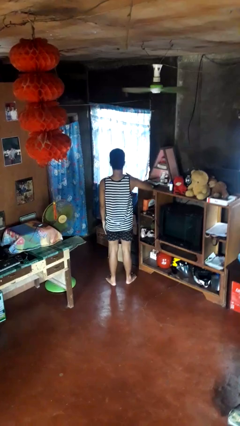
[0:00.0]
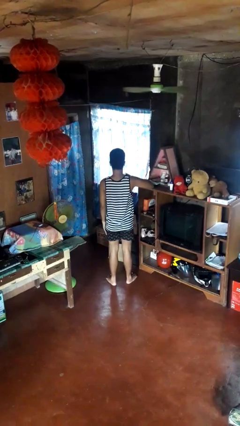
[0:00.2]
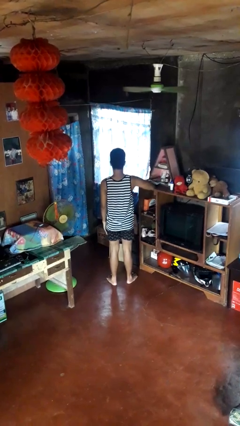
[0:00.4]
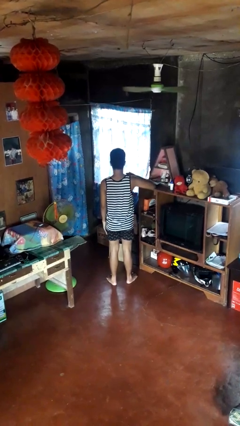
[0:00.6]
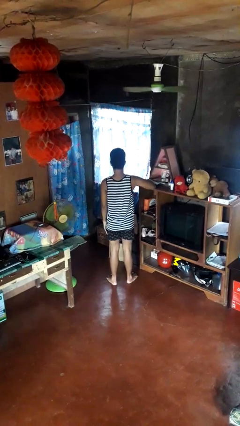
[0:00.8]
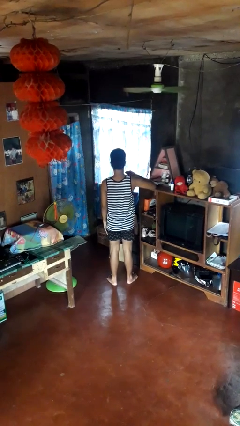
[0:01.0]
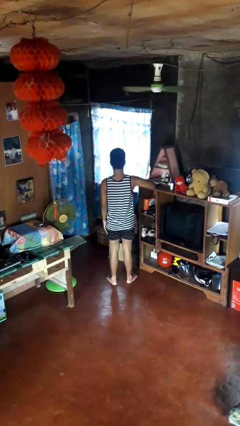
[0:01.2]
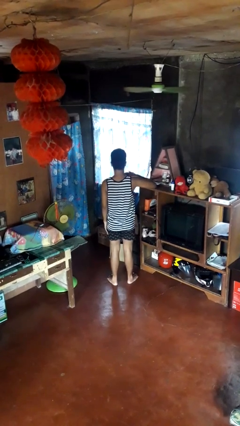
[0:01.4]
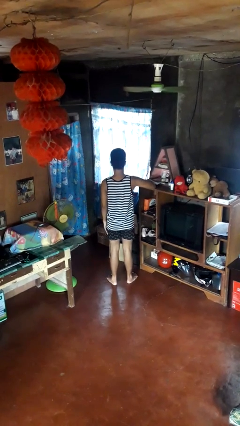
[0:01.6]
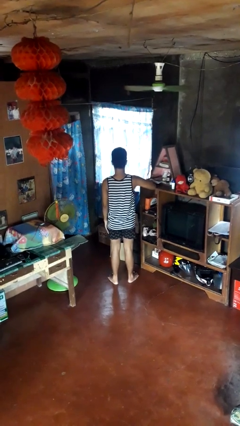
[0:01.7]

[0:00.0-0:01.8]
person drums on chest

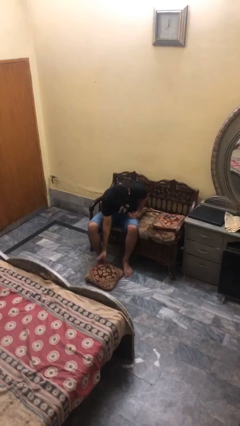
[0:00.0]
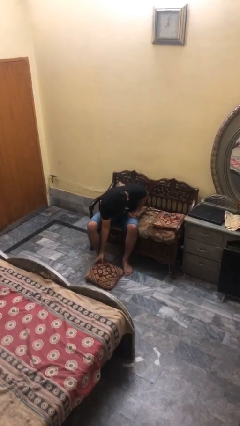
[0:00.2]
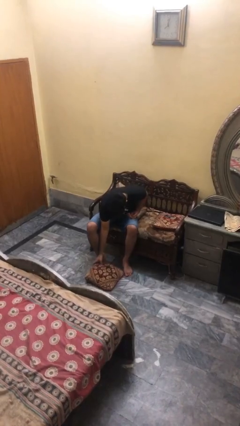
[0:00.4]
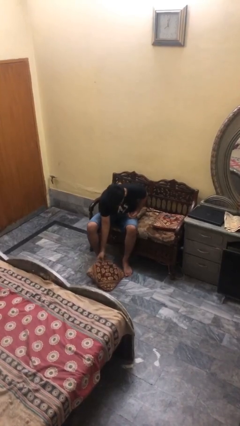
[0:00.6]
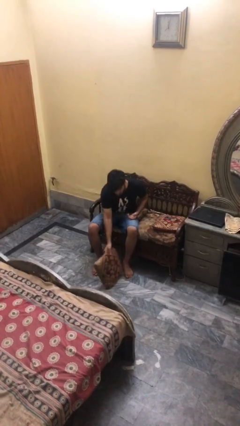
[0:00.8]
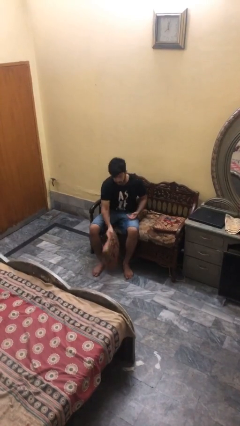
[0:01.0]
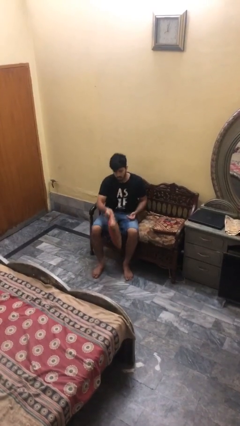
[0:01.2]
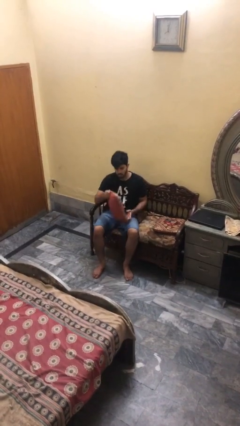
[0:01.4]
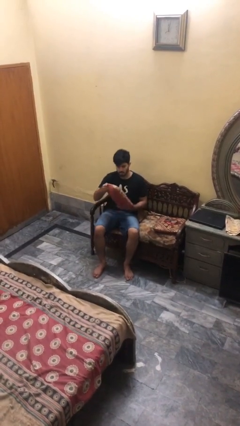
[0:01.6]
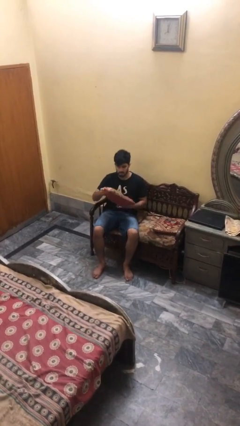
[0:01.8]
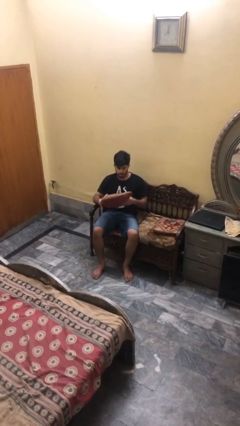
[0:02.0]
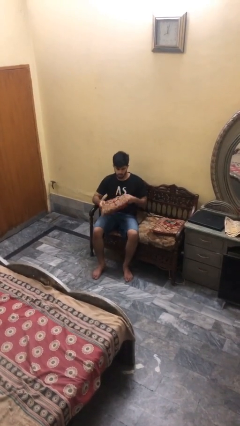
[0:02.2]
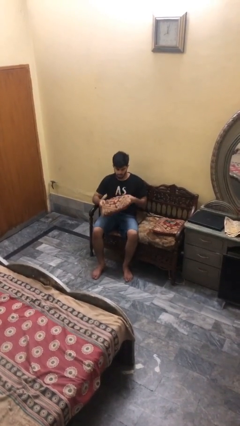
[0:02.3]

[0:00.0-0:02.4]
person picks up object from floor

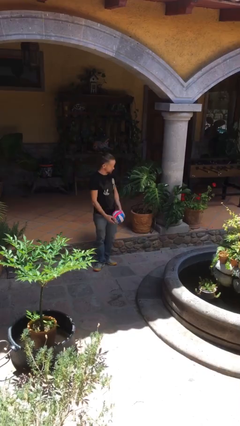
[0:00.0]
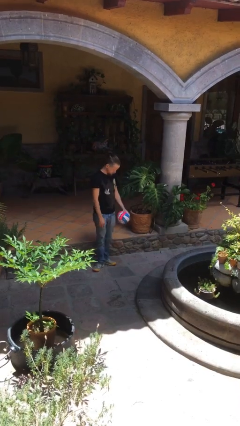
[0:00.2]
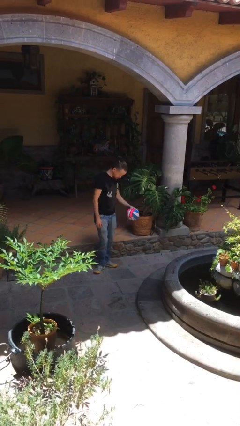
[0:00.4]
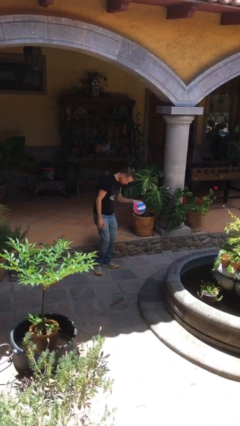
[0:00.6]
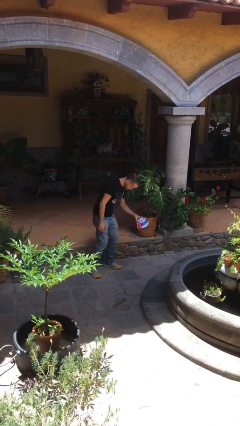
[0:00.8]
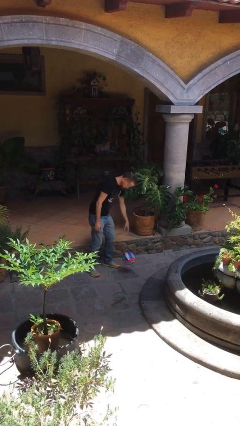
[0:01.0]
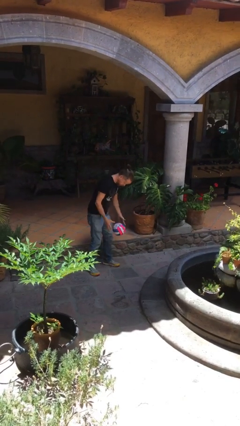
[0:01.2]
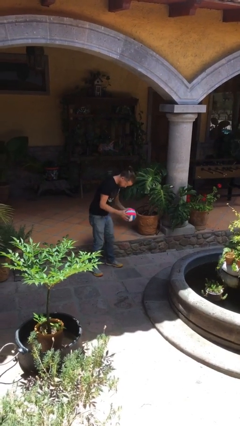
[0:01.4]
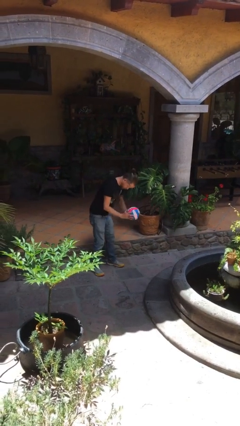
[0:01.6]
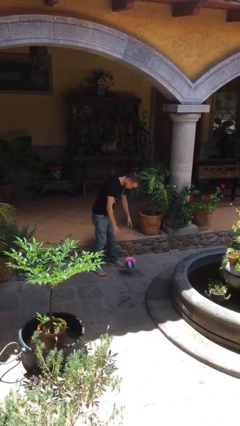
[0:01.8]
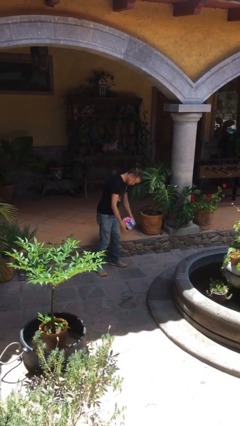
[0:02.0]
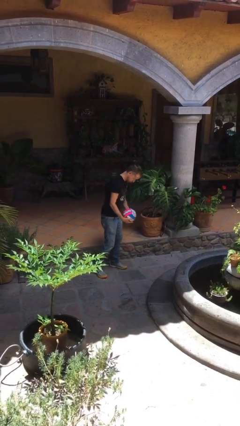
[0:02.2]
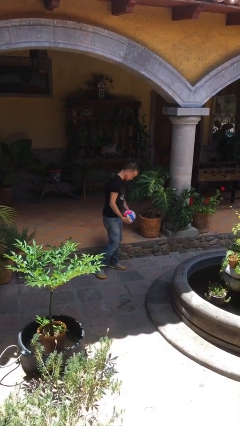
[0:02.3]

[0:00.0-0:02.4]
person bounces ball on floor

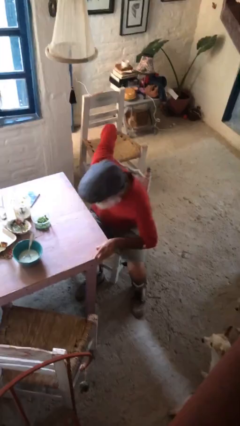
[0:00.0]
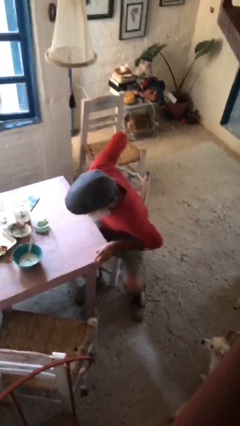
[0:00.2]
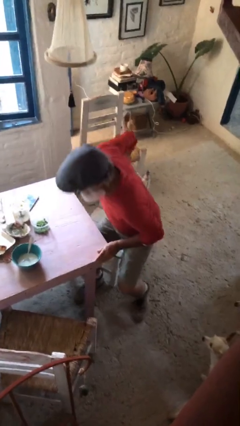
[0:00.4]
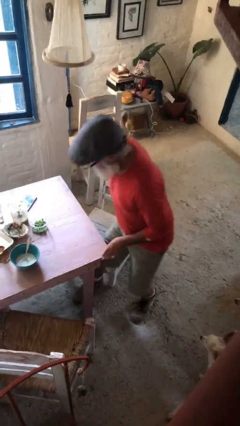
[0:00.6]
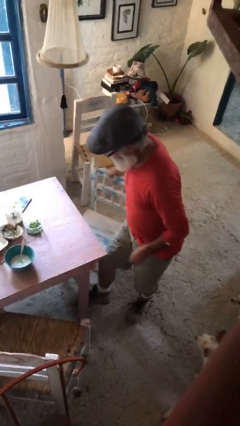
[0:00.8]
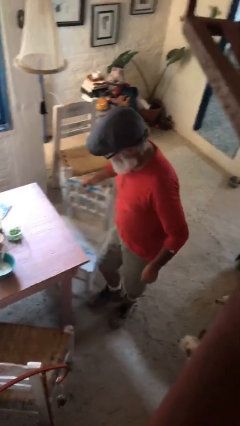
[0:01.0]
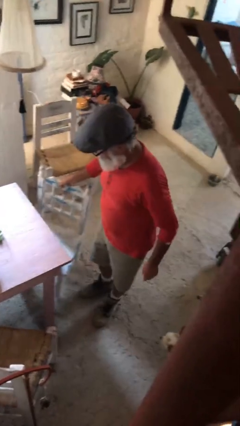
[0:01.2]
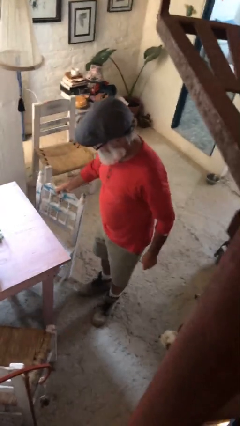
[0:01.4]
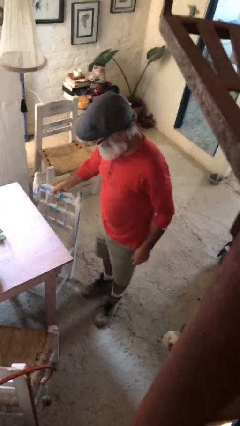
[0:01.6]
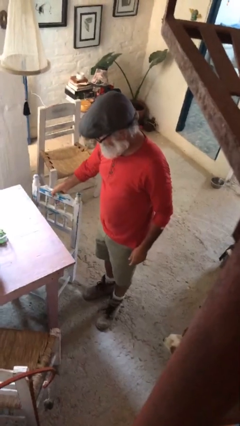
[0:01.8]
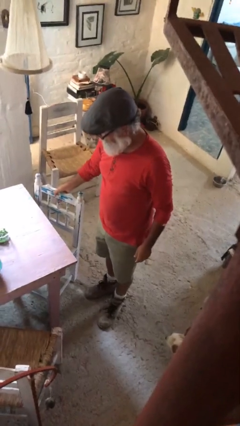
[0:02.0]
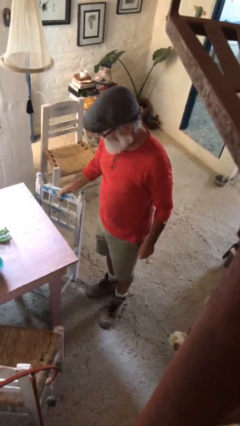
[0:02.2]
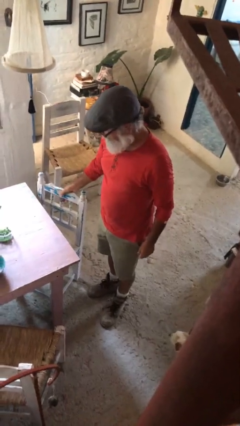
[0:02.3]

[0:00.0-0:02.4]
person stands up

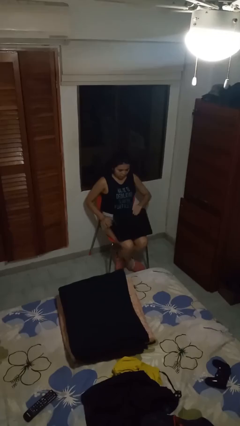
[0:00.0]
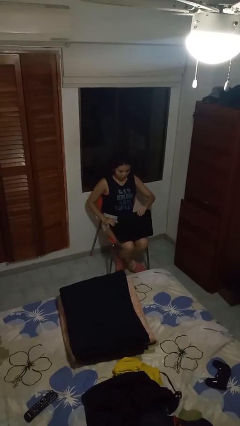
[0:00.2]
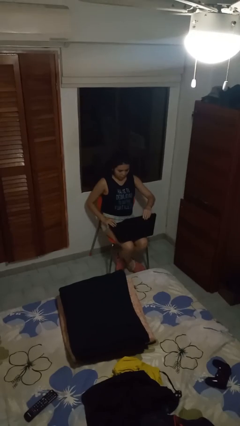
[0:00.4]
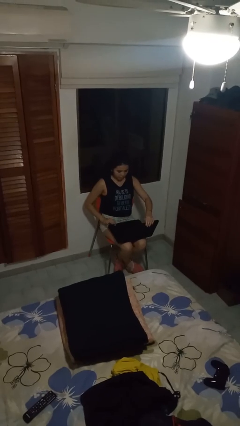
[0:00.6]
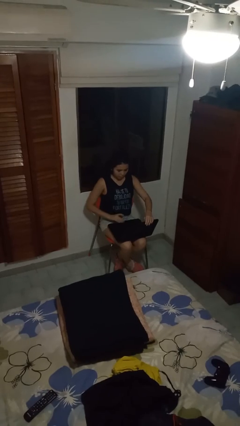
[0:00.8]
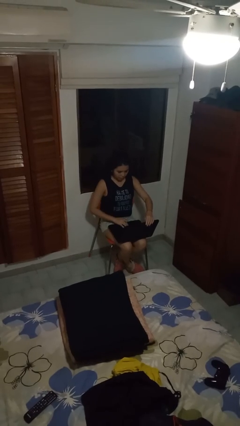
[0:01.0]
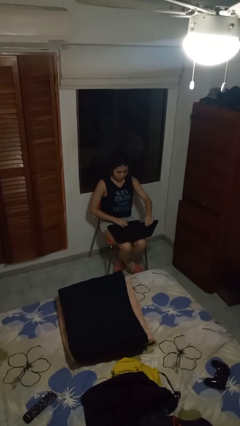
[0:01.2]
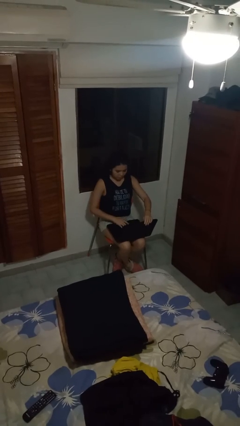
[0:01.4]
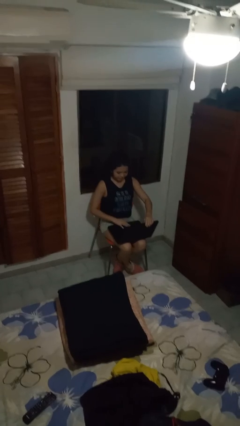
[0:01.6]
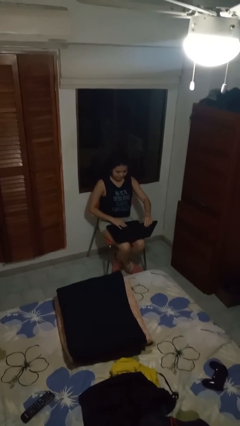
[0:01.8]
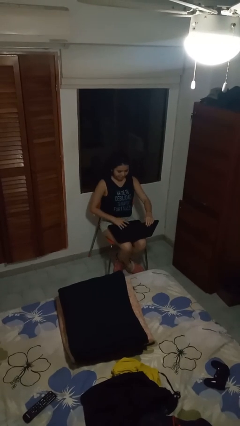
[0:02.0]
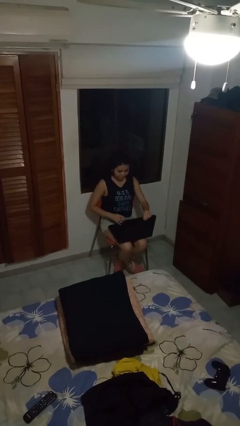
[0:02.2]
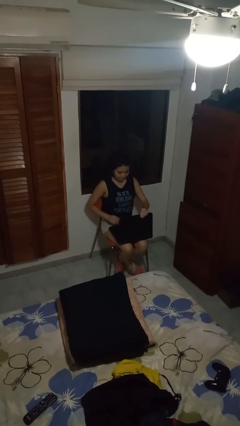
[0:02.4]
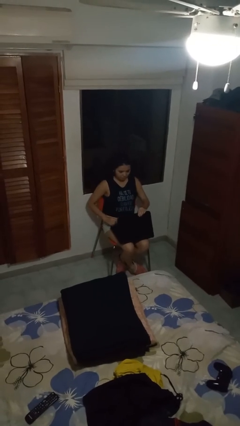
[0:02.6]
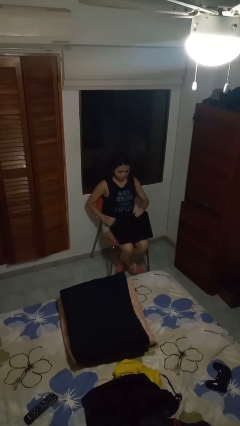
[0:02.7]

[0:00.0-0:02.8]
person interacts with laptop

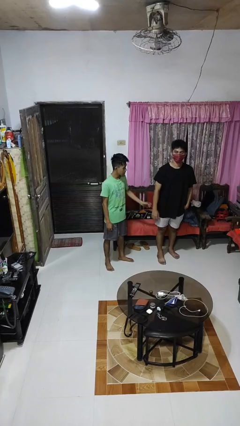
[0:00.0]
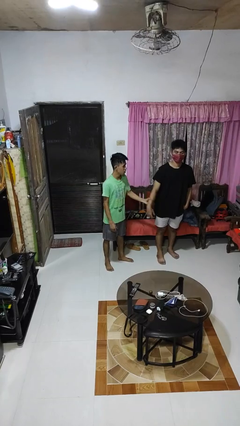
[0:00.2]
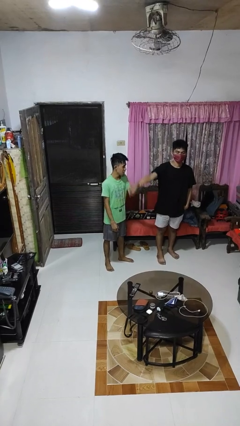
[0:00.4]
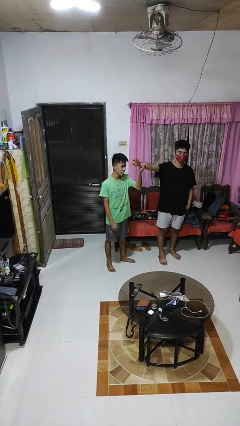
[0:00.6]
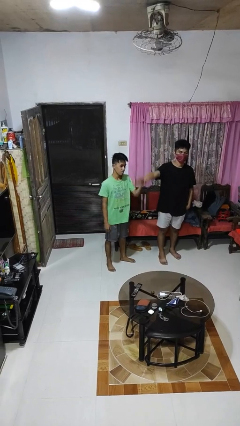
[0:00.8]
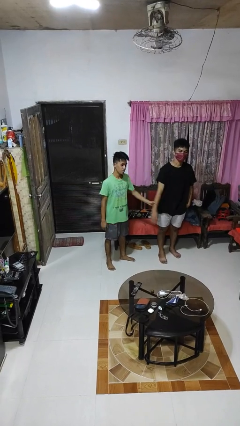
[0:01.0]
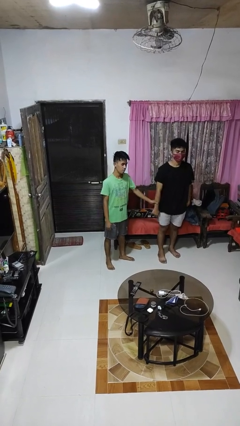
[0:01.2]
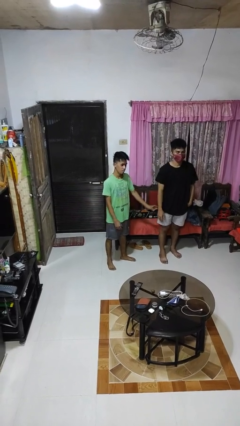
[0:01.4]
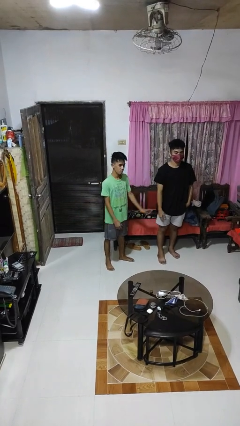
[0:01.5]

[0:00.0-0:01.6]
person grabs person by forearm

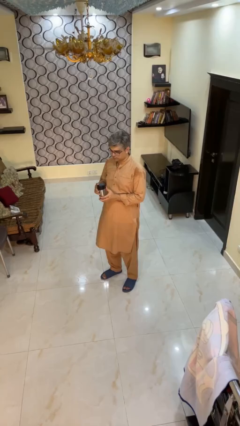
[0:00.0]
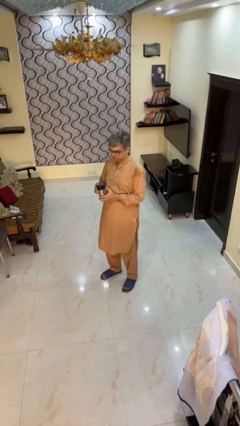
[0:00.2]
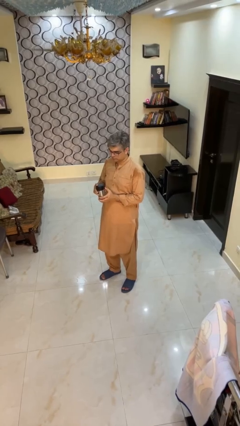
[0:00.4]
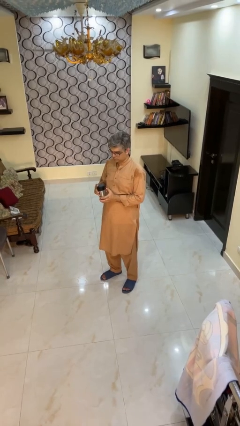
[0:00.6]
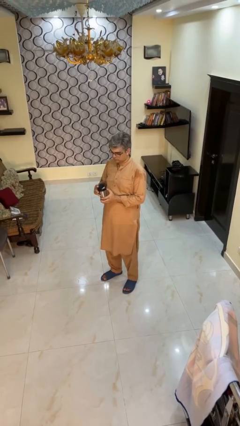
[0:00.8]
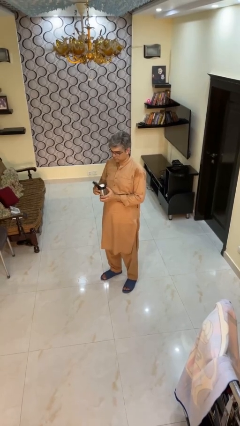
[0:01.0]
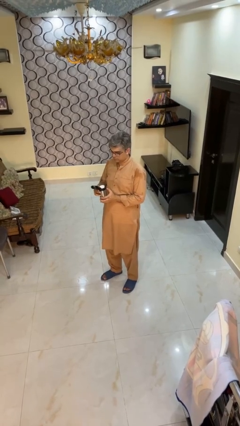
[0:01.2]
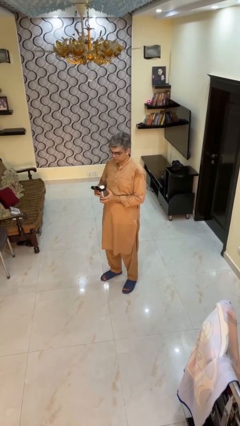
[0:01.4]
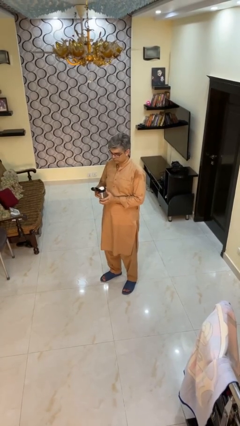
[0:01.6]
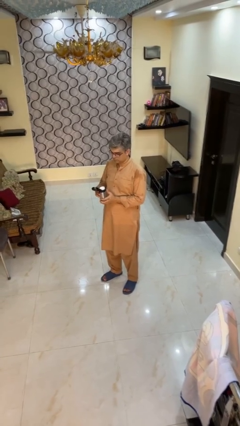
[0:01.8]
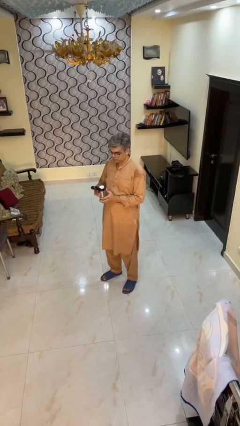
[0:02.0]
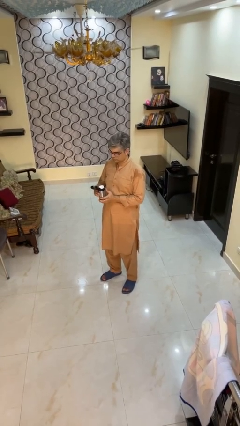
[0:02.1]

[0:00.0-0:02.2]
person opens beverage can

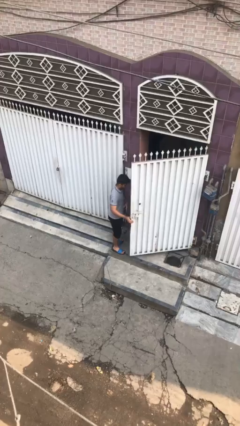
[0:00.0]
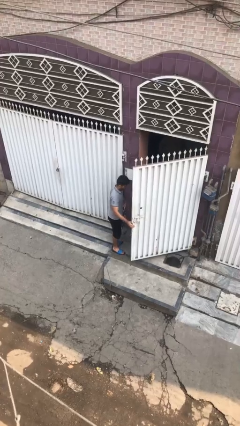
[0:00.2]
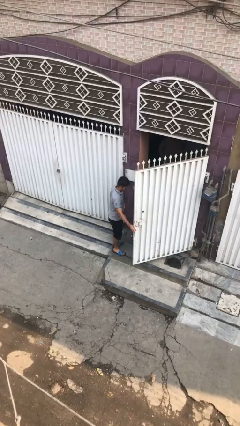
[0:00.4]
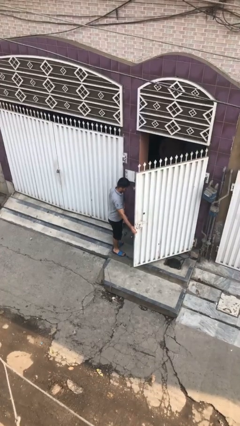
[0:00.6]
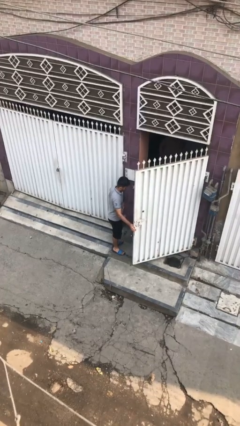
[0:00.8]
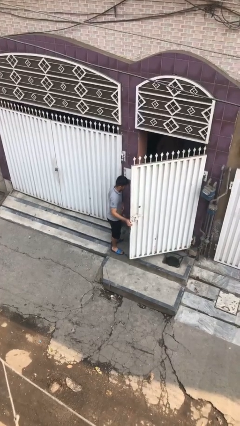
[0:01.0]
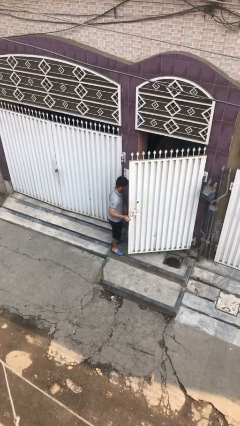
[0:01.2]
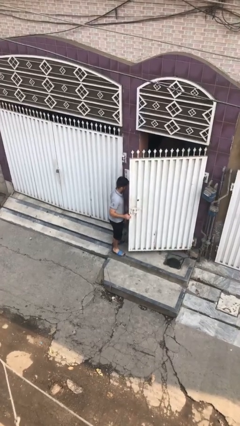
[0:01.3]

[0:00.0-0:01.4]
person opens facility door
